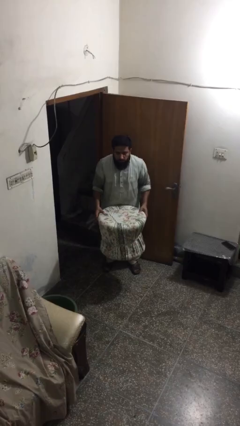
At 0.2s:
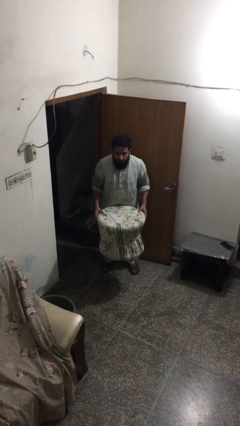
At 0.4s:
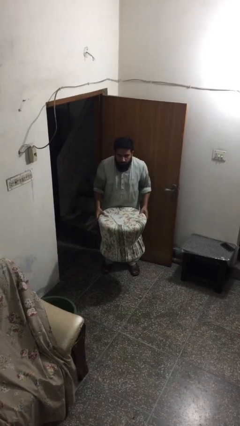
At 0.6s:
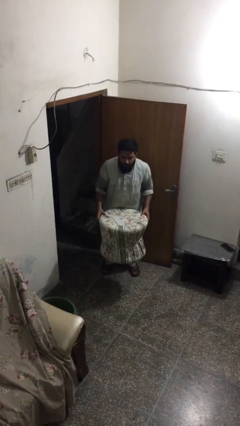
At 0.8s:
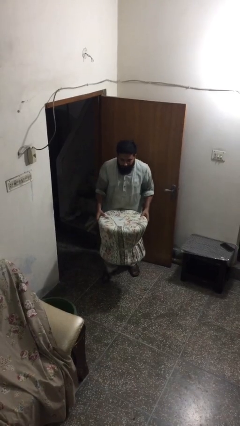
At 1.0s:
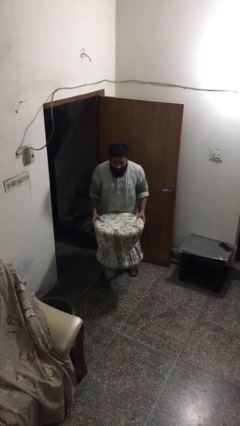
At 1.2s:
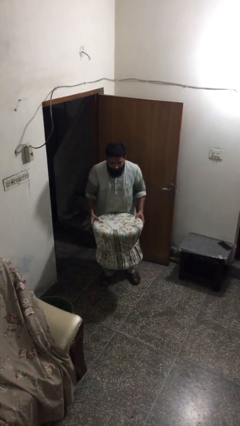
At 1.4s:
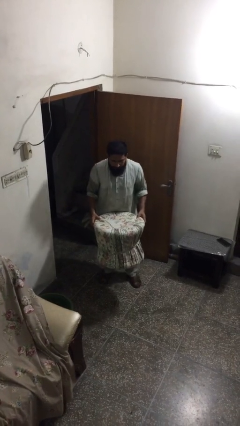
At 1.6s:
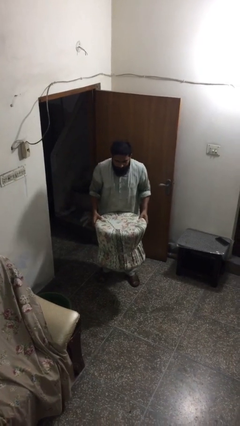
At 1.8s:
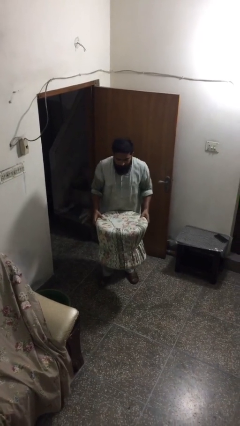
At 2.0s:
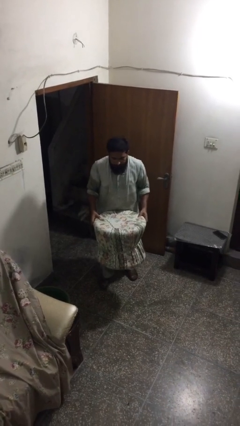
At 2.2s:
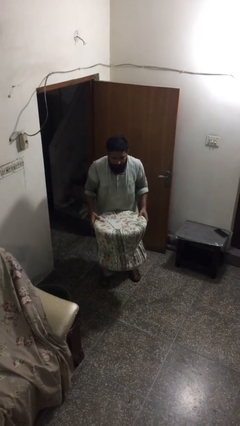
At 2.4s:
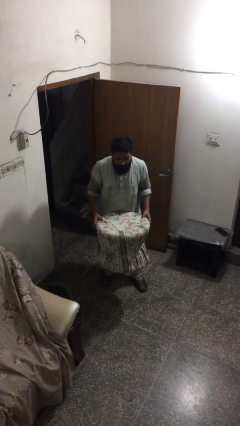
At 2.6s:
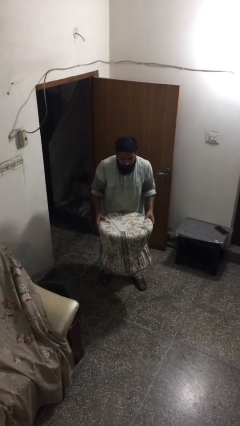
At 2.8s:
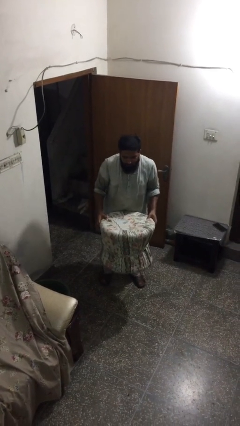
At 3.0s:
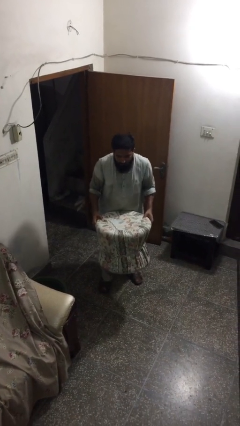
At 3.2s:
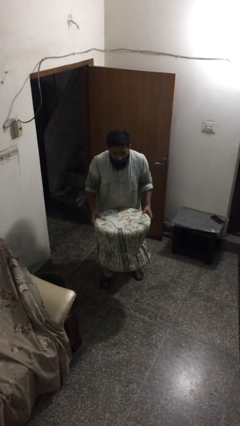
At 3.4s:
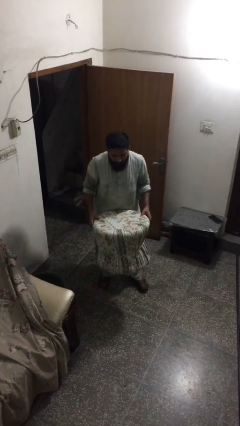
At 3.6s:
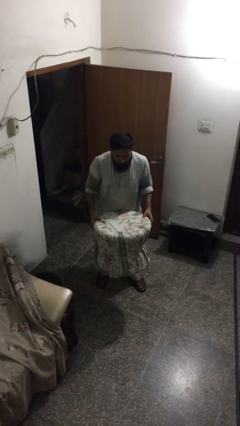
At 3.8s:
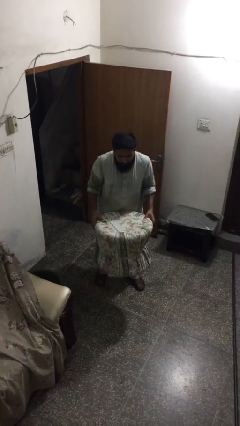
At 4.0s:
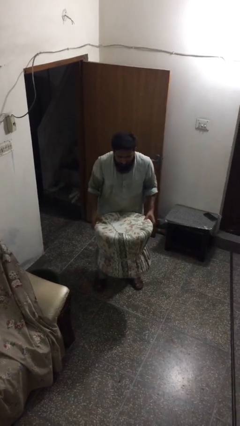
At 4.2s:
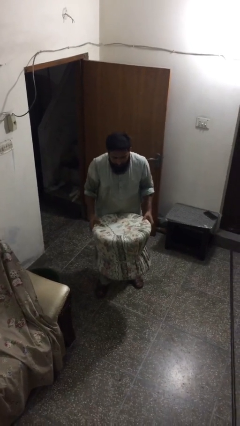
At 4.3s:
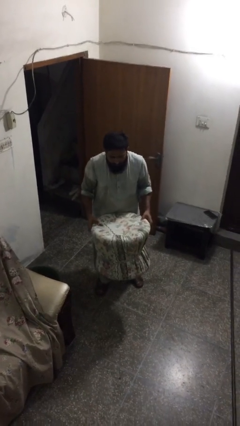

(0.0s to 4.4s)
person carries heavy object

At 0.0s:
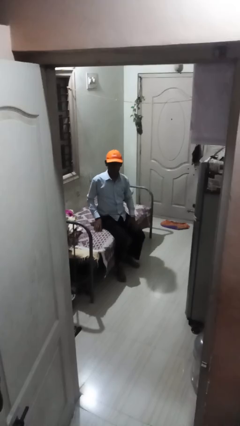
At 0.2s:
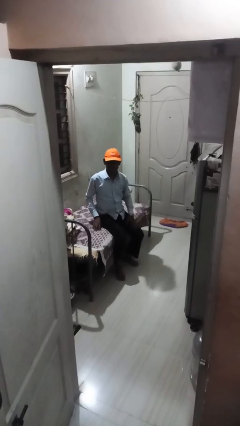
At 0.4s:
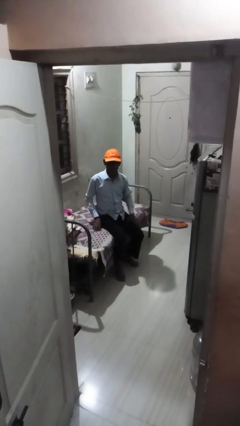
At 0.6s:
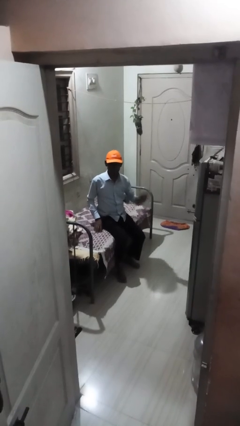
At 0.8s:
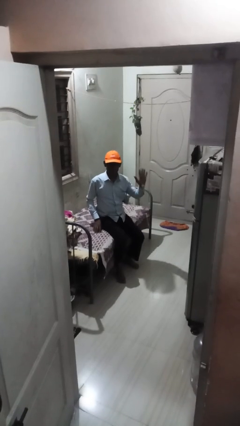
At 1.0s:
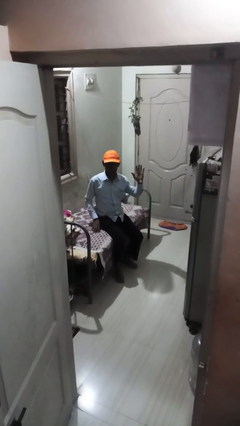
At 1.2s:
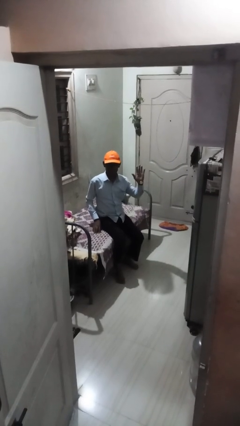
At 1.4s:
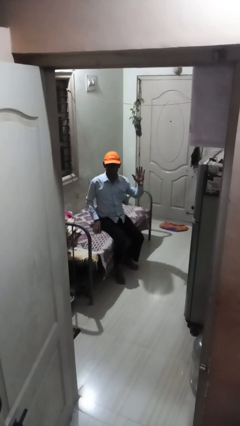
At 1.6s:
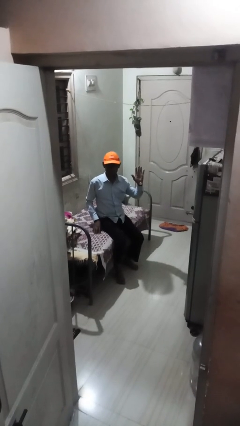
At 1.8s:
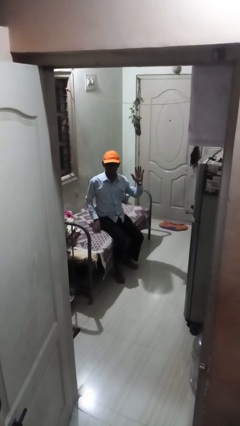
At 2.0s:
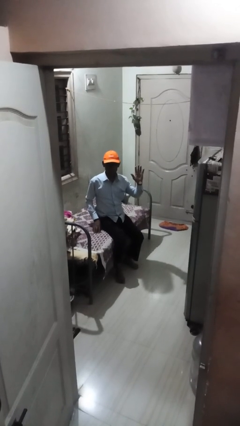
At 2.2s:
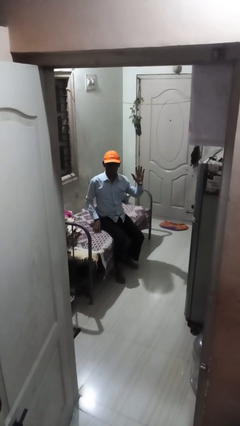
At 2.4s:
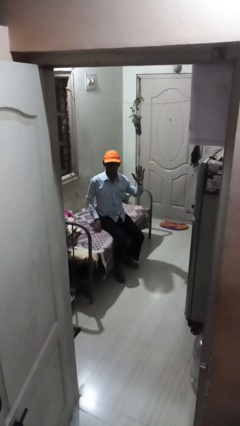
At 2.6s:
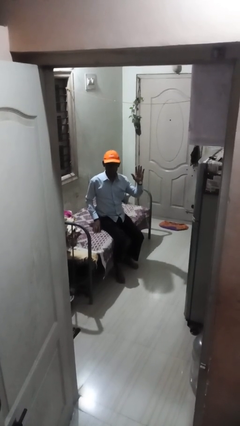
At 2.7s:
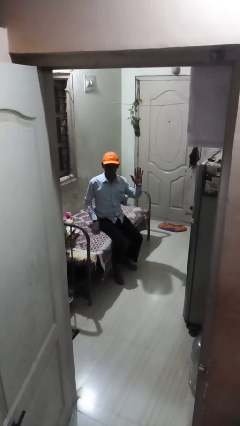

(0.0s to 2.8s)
person gestures number five

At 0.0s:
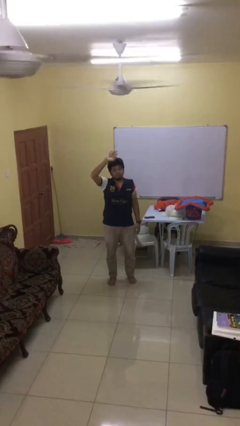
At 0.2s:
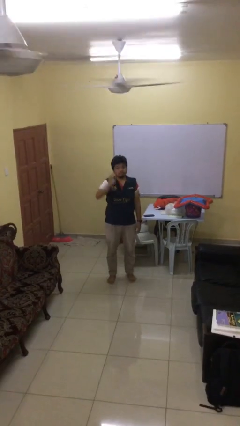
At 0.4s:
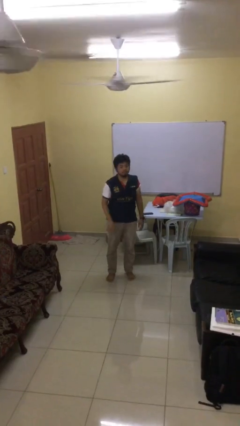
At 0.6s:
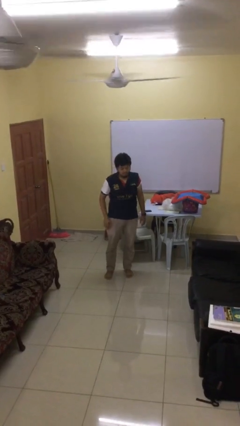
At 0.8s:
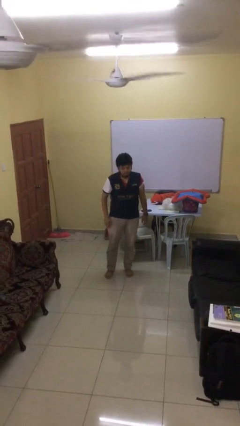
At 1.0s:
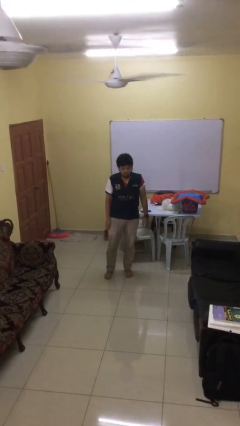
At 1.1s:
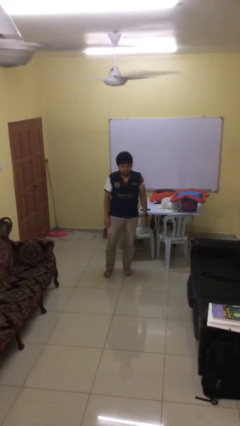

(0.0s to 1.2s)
person gestures lower hand

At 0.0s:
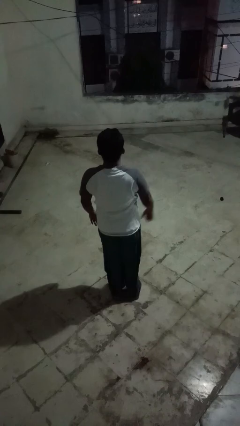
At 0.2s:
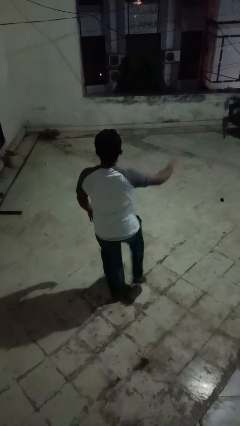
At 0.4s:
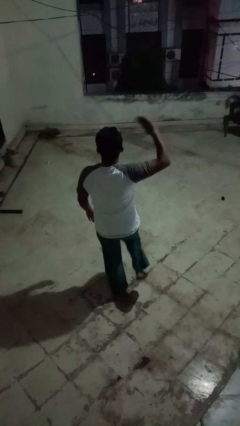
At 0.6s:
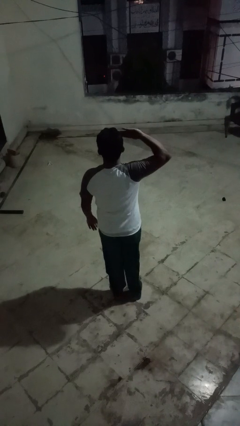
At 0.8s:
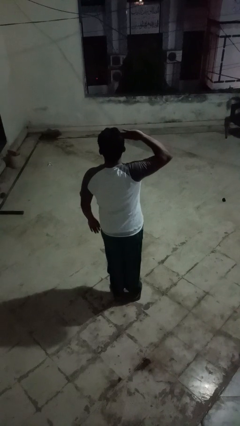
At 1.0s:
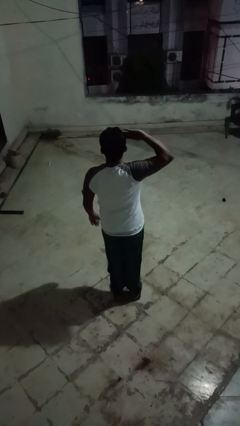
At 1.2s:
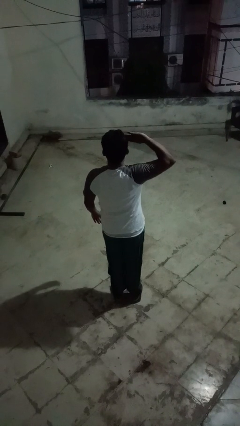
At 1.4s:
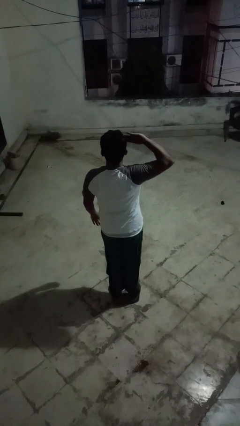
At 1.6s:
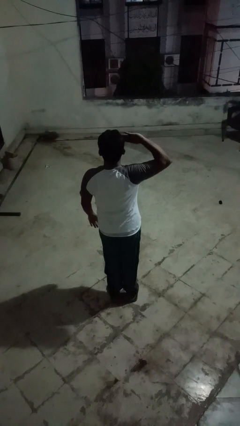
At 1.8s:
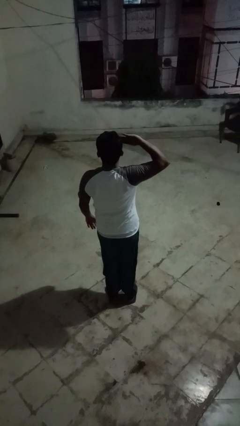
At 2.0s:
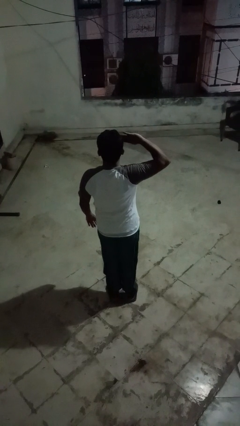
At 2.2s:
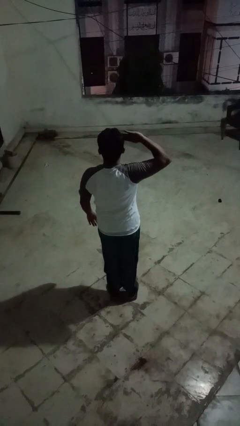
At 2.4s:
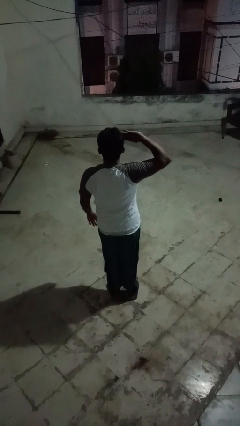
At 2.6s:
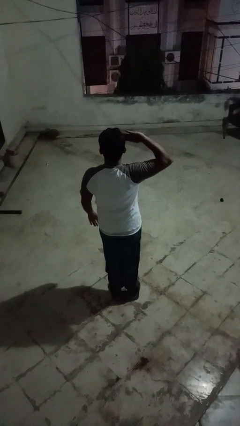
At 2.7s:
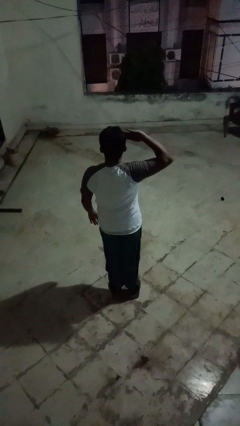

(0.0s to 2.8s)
person salutes

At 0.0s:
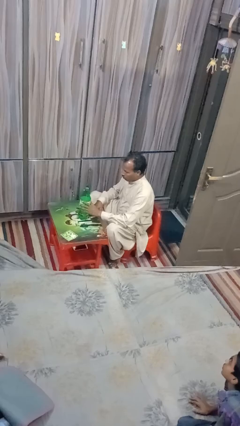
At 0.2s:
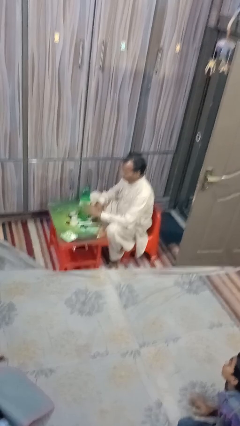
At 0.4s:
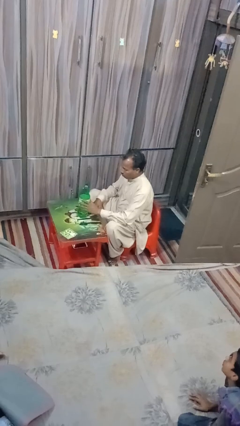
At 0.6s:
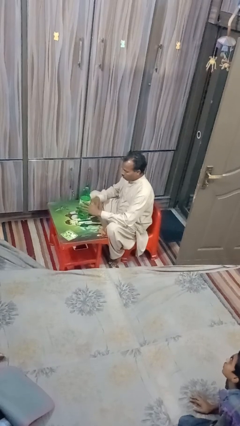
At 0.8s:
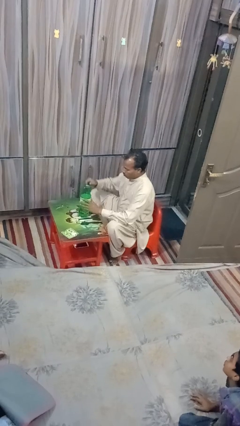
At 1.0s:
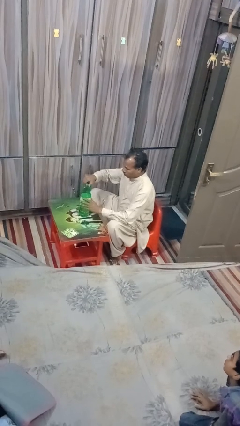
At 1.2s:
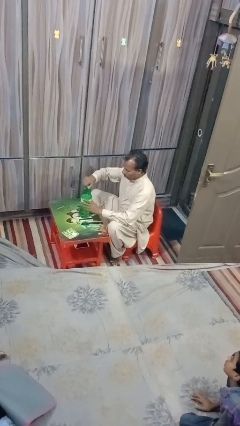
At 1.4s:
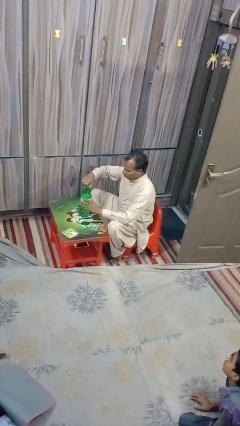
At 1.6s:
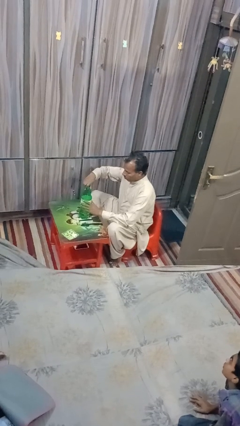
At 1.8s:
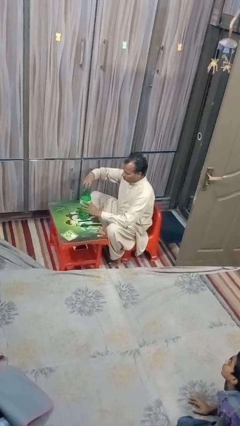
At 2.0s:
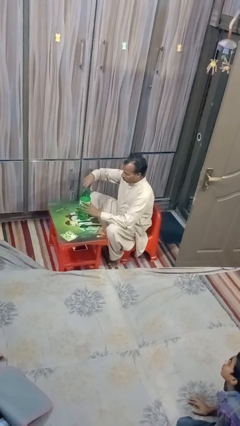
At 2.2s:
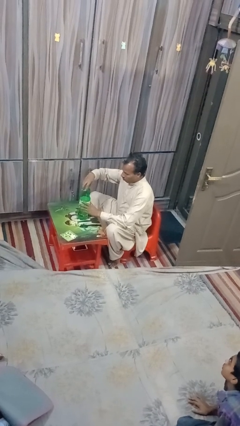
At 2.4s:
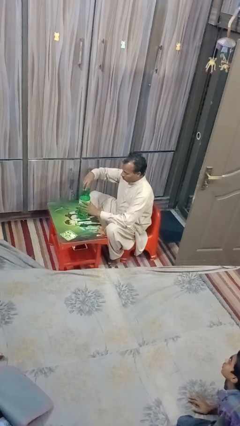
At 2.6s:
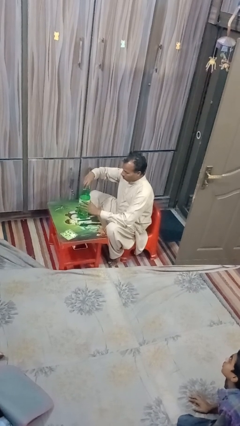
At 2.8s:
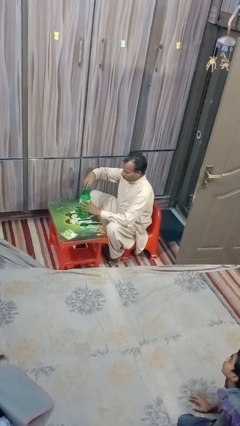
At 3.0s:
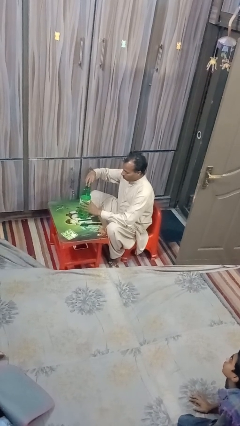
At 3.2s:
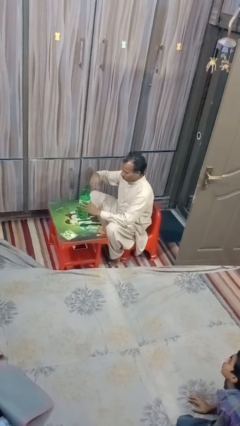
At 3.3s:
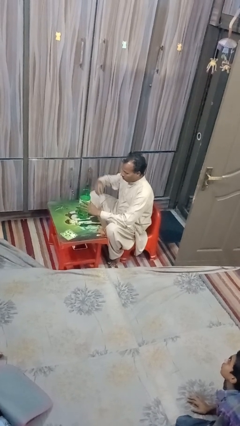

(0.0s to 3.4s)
person unscrews lid from bottle

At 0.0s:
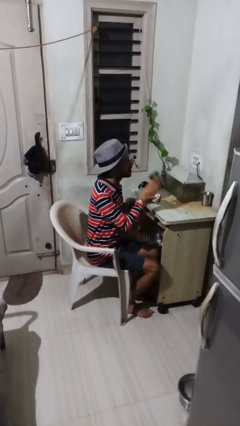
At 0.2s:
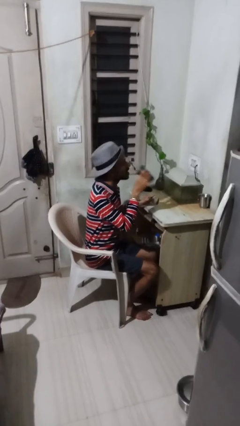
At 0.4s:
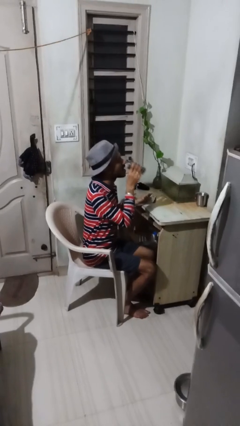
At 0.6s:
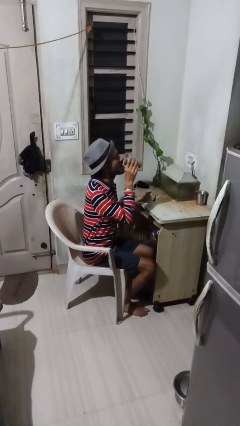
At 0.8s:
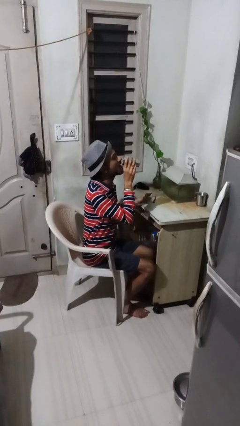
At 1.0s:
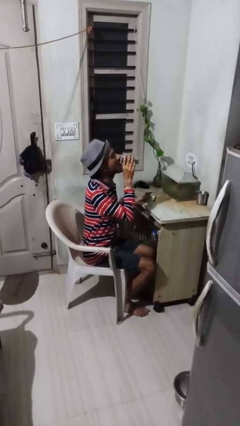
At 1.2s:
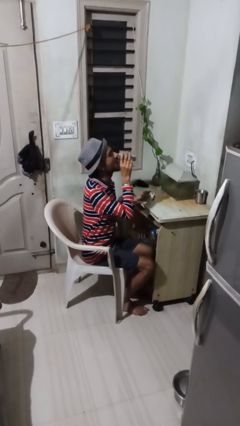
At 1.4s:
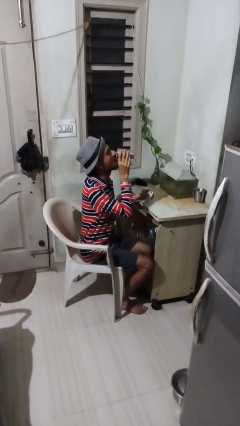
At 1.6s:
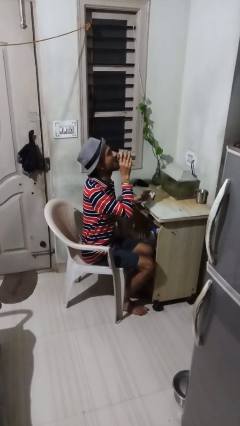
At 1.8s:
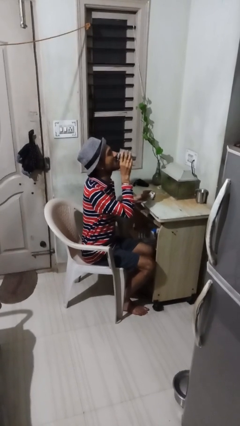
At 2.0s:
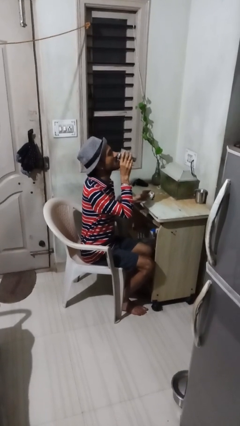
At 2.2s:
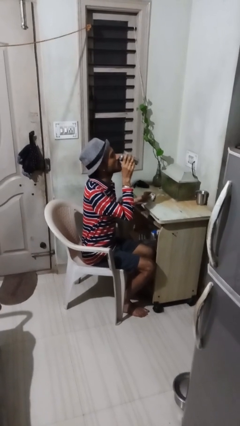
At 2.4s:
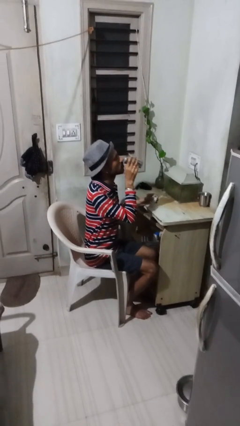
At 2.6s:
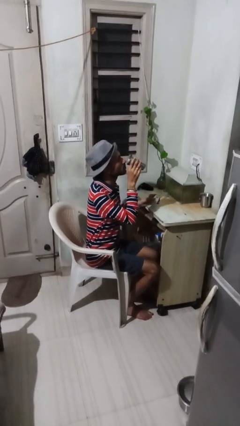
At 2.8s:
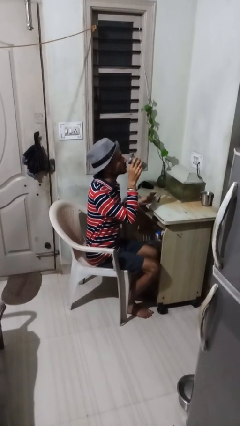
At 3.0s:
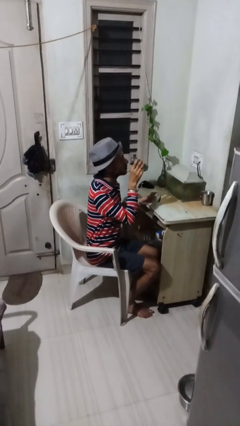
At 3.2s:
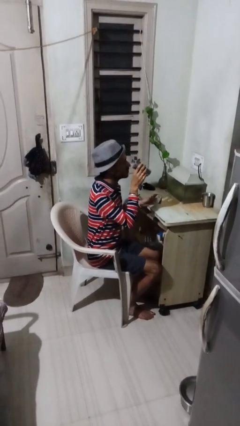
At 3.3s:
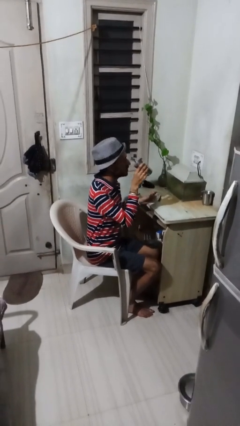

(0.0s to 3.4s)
person drinks from cup
